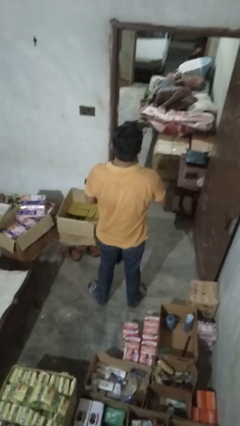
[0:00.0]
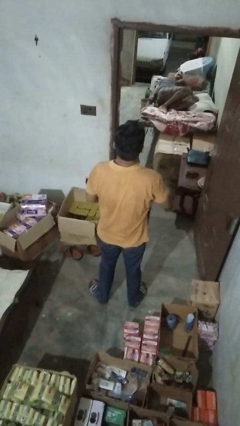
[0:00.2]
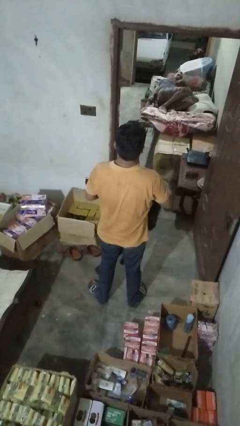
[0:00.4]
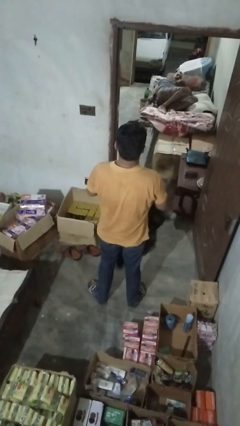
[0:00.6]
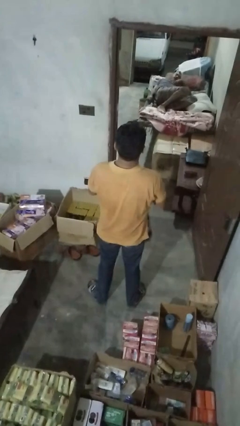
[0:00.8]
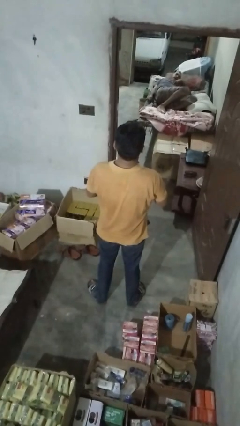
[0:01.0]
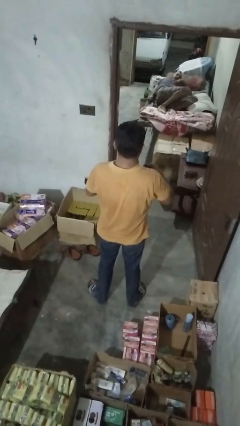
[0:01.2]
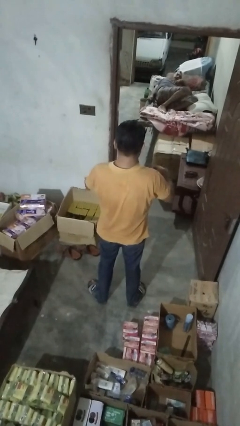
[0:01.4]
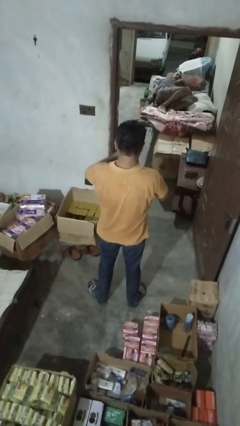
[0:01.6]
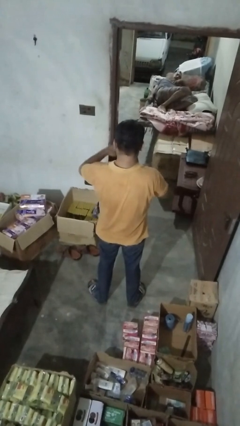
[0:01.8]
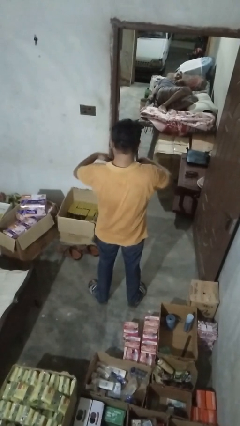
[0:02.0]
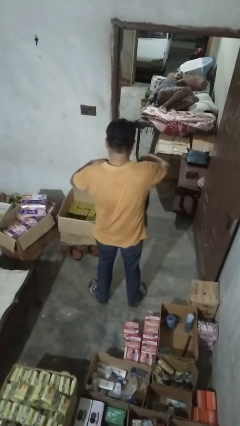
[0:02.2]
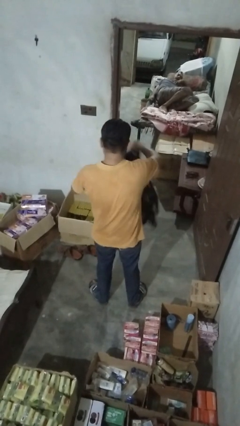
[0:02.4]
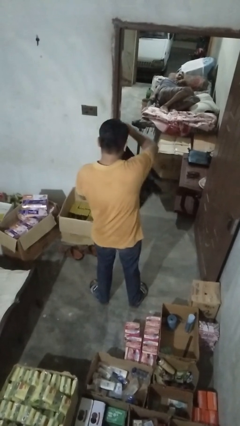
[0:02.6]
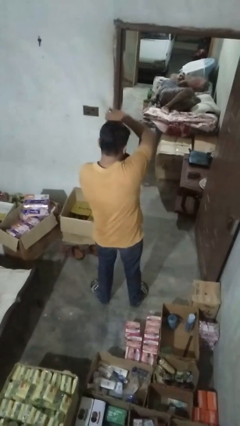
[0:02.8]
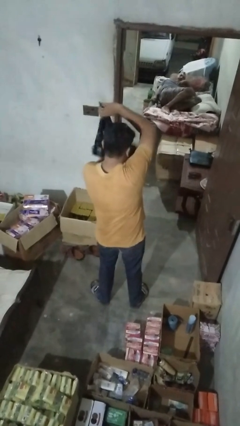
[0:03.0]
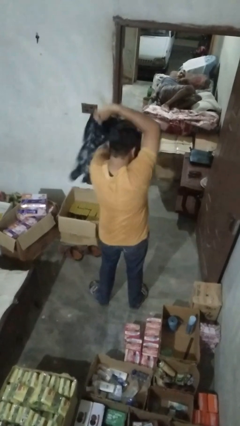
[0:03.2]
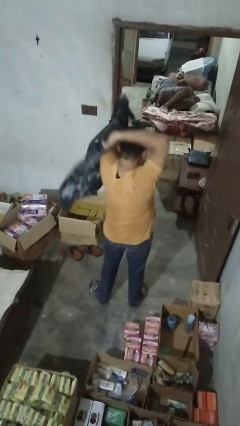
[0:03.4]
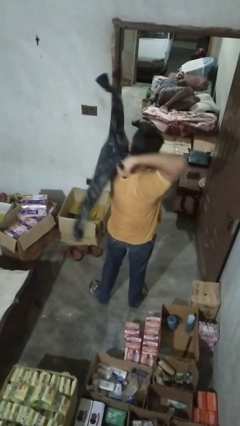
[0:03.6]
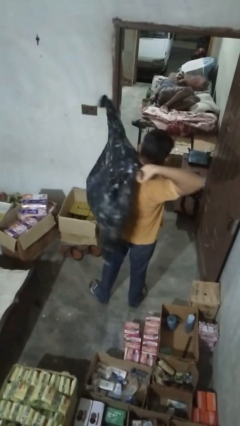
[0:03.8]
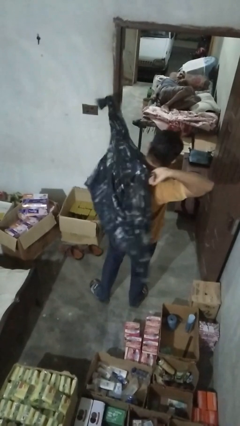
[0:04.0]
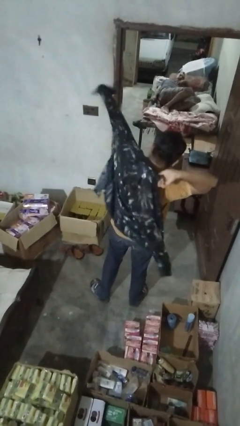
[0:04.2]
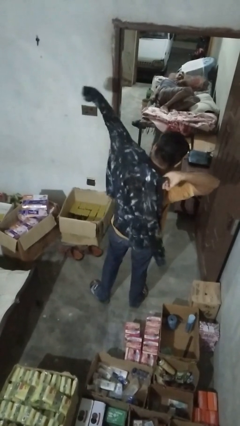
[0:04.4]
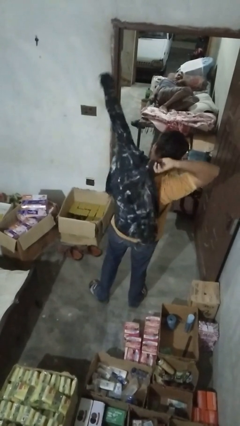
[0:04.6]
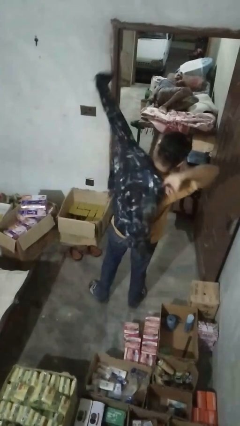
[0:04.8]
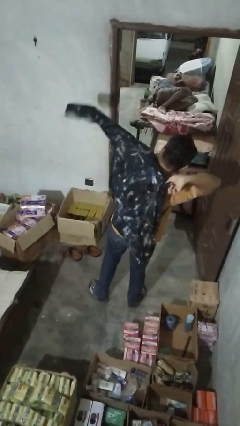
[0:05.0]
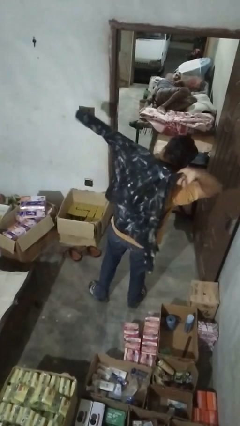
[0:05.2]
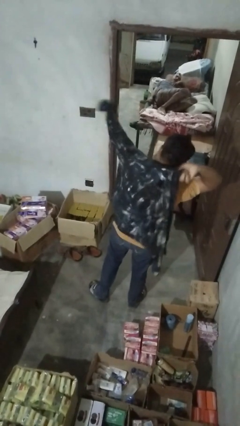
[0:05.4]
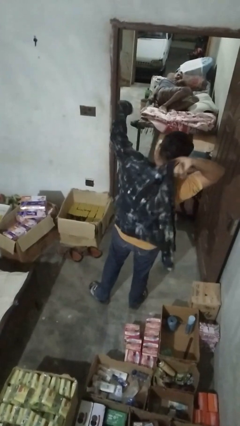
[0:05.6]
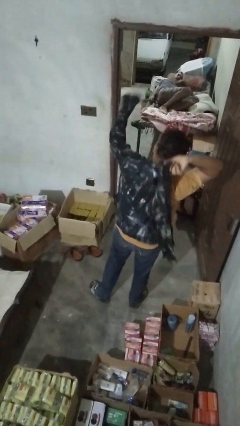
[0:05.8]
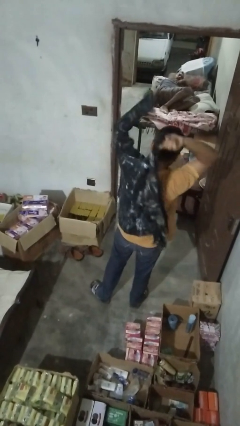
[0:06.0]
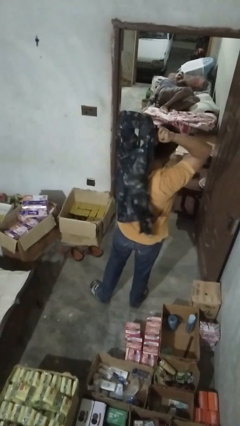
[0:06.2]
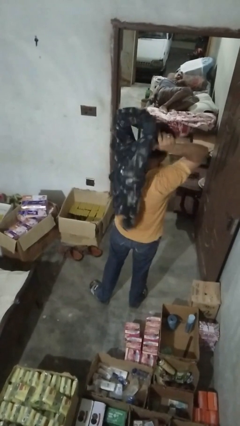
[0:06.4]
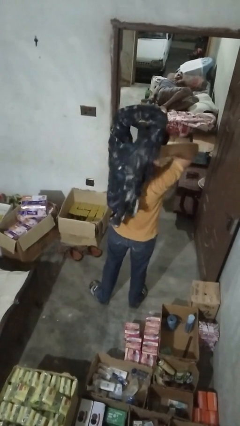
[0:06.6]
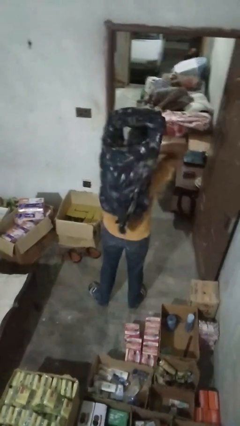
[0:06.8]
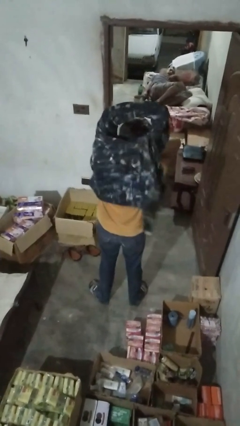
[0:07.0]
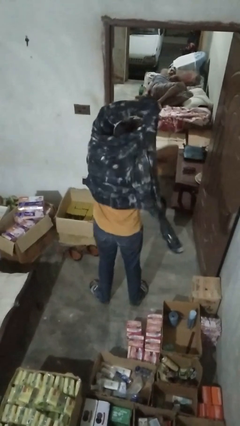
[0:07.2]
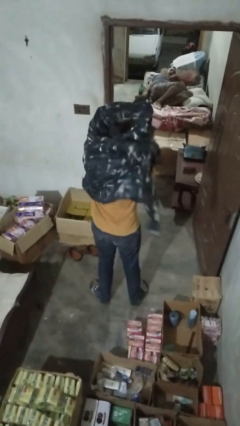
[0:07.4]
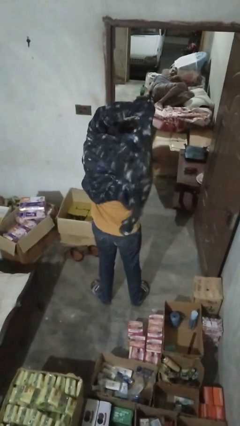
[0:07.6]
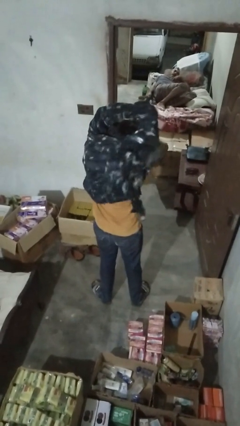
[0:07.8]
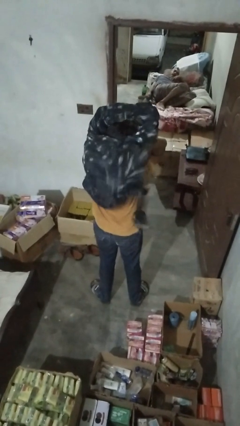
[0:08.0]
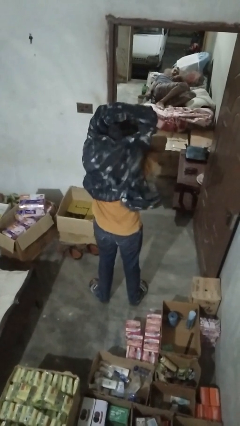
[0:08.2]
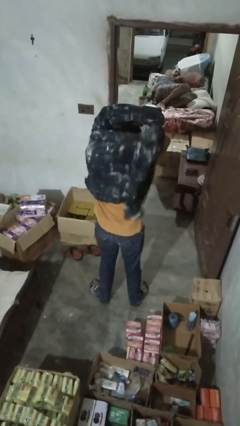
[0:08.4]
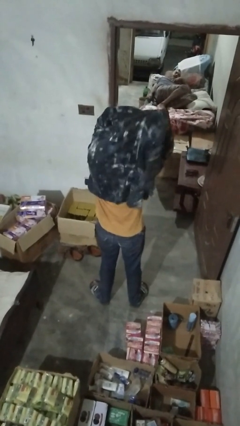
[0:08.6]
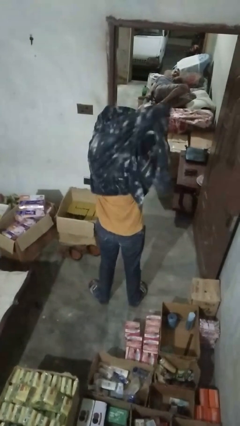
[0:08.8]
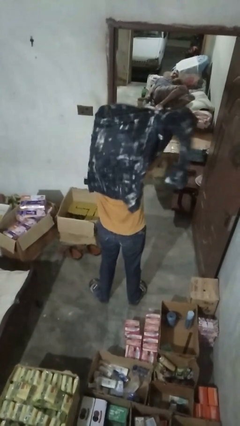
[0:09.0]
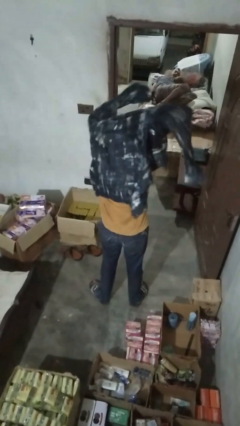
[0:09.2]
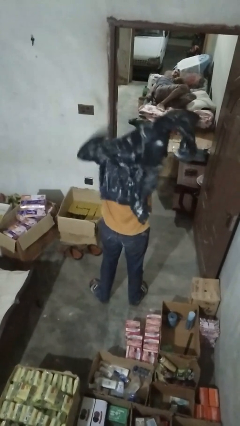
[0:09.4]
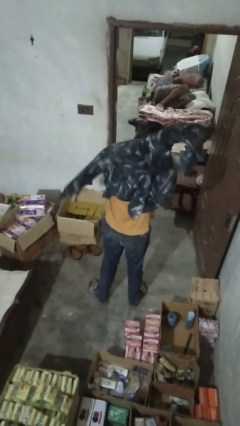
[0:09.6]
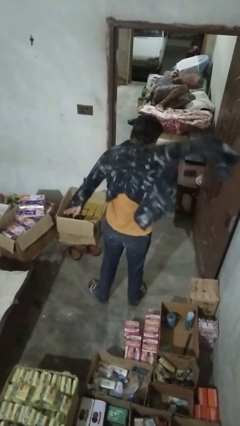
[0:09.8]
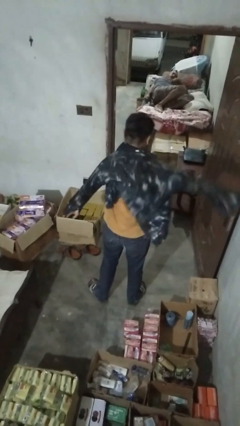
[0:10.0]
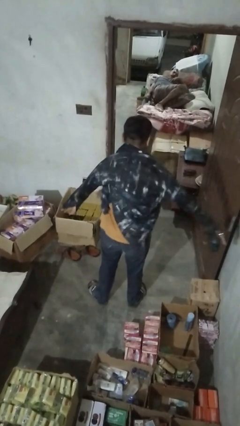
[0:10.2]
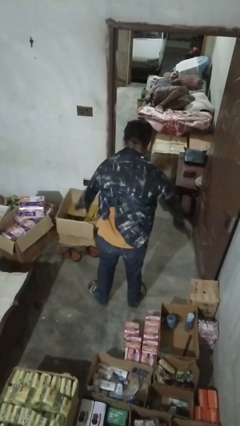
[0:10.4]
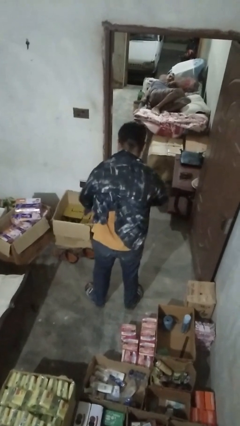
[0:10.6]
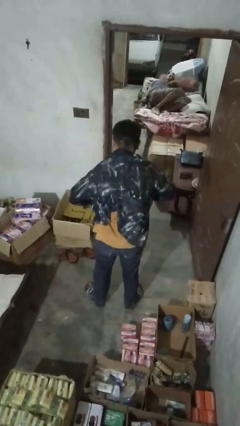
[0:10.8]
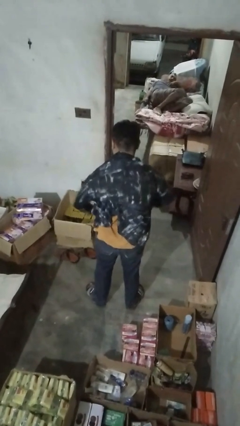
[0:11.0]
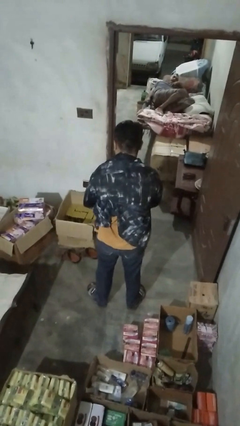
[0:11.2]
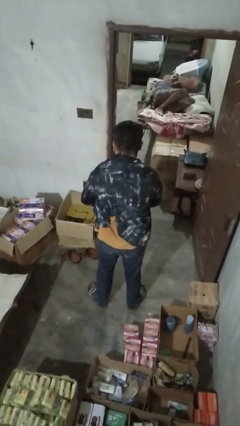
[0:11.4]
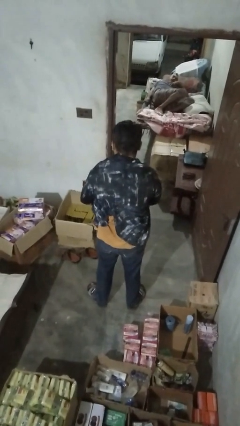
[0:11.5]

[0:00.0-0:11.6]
person puts on shirt

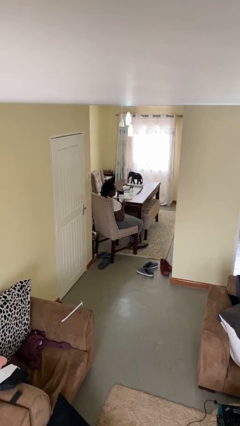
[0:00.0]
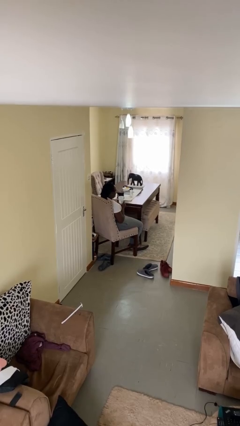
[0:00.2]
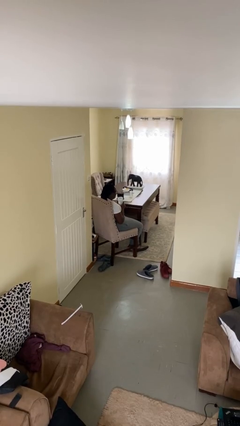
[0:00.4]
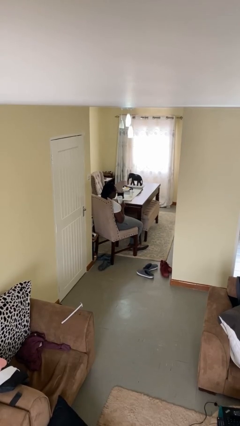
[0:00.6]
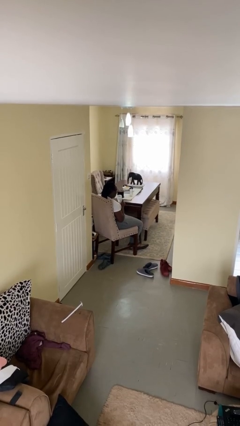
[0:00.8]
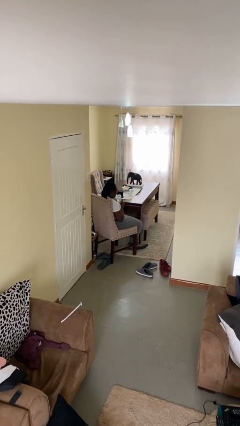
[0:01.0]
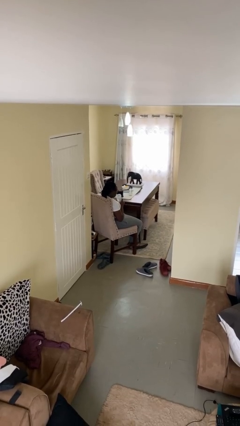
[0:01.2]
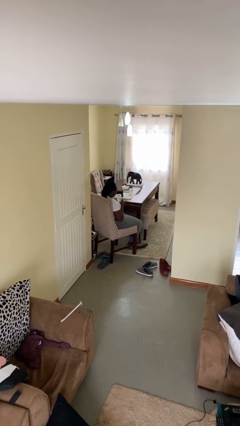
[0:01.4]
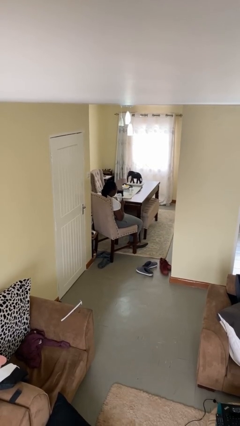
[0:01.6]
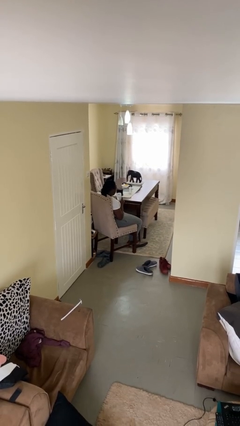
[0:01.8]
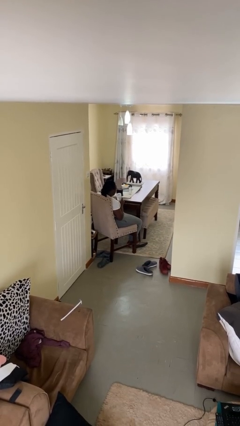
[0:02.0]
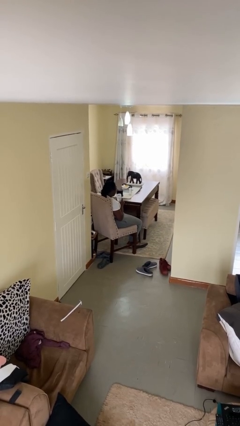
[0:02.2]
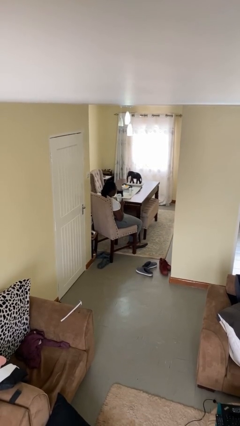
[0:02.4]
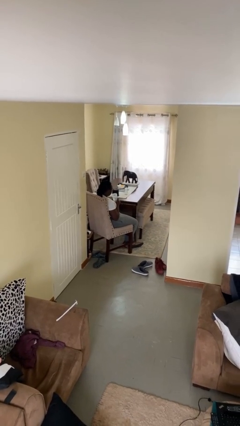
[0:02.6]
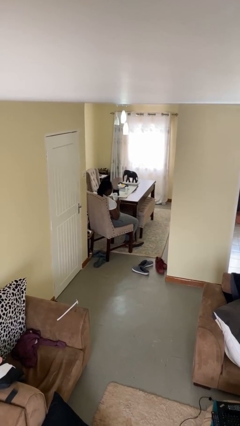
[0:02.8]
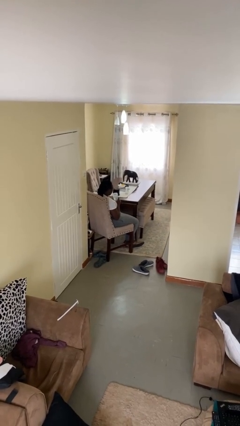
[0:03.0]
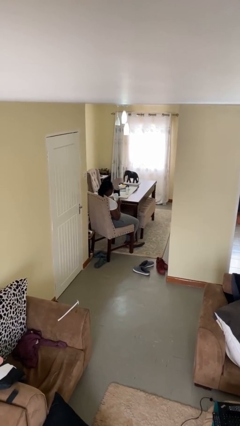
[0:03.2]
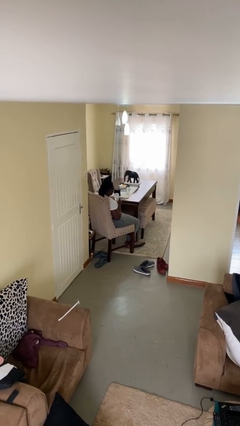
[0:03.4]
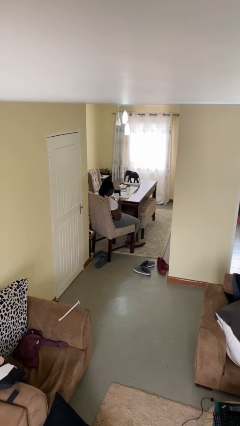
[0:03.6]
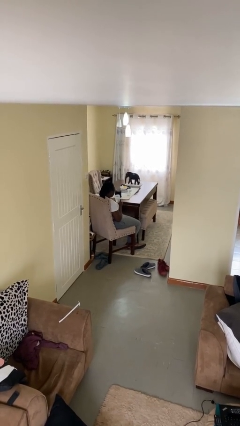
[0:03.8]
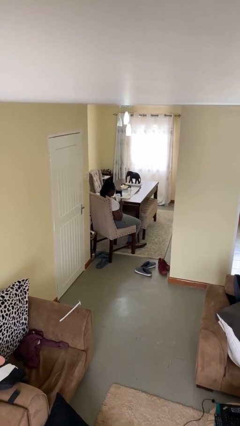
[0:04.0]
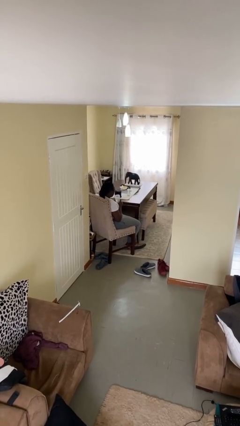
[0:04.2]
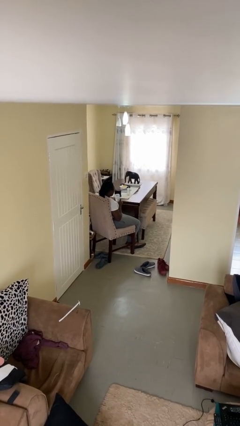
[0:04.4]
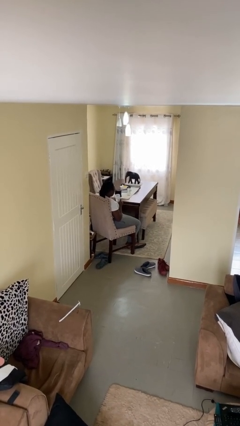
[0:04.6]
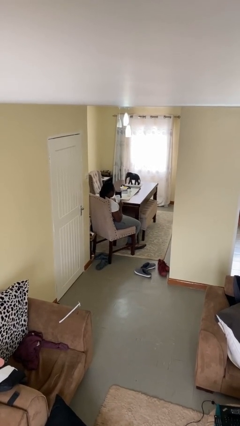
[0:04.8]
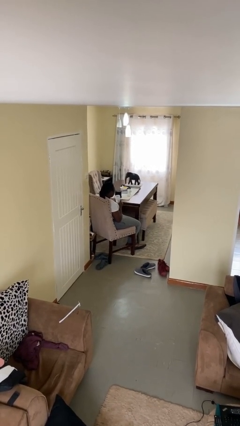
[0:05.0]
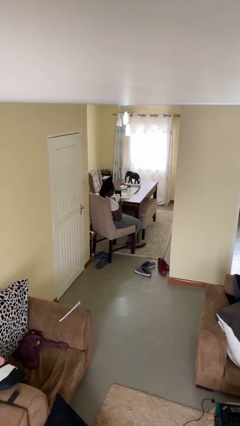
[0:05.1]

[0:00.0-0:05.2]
person drinks from straw

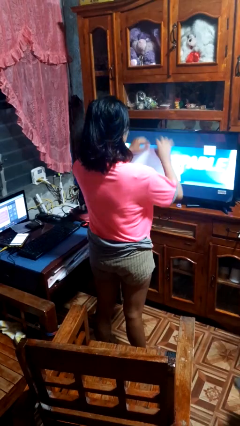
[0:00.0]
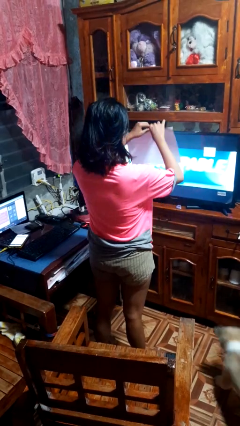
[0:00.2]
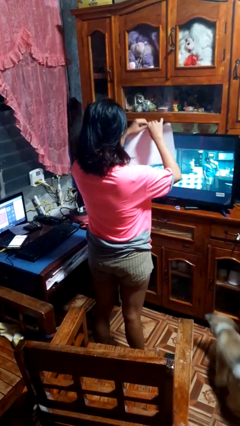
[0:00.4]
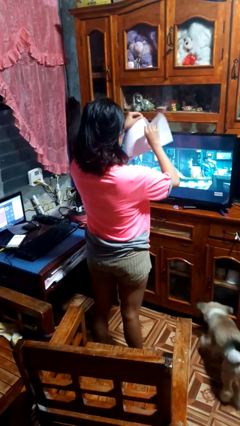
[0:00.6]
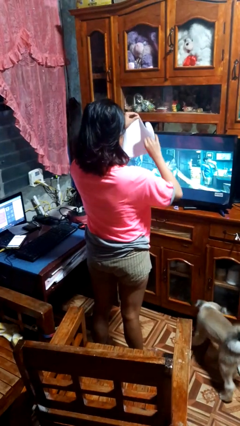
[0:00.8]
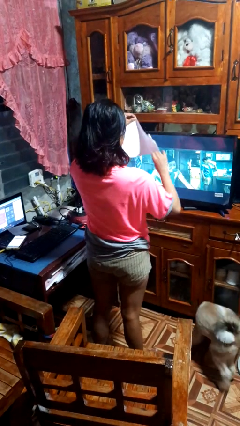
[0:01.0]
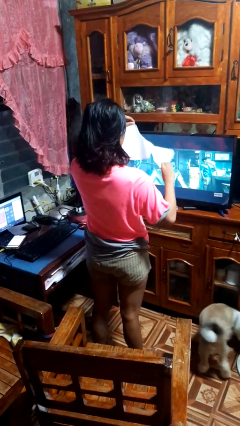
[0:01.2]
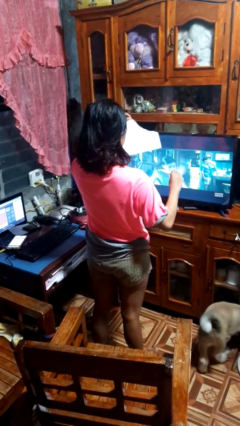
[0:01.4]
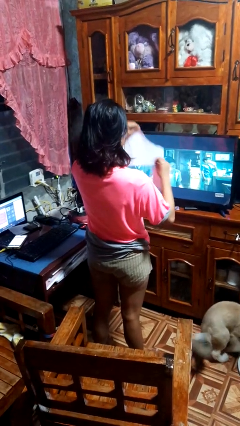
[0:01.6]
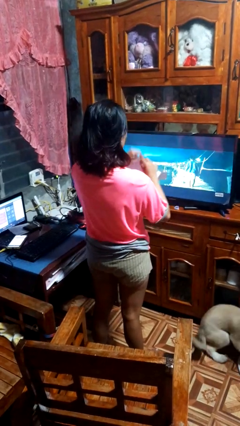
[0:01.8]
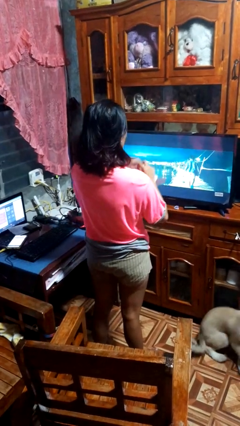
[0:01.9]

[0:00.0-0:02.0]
person tears paper
